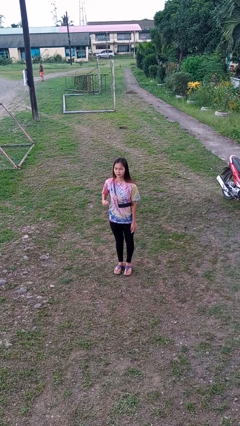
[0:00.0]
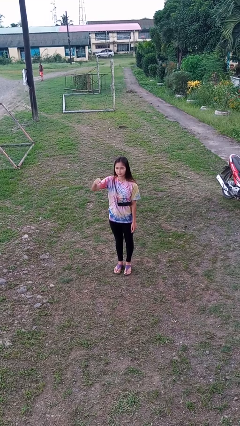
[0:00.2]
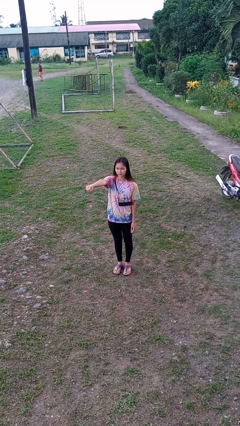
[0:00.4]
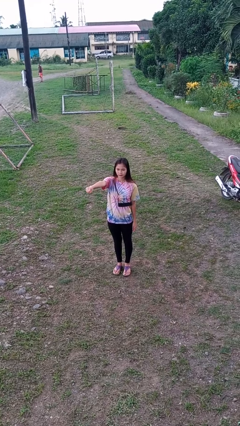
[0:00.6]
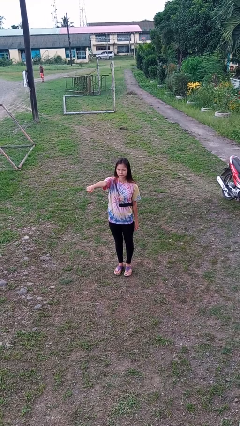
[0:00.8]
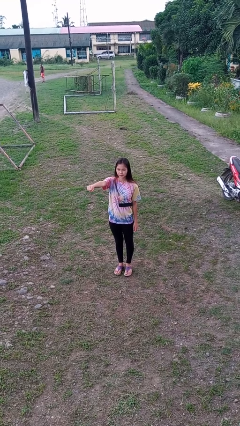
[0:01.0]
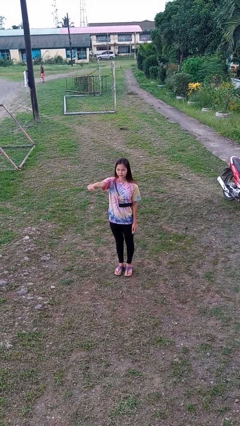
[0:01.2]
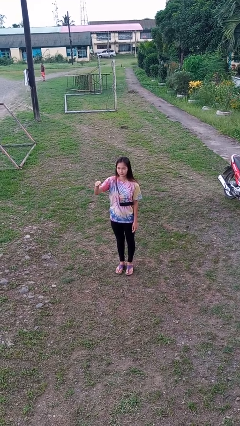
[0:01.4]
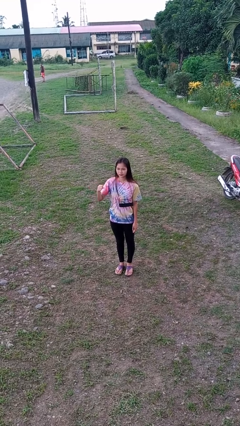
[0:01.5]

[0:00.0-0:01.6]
person punches

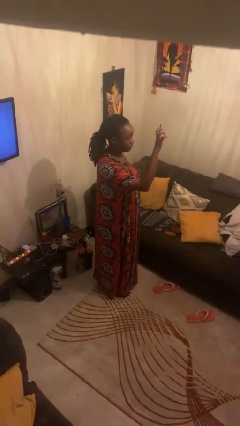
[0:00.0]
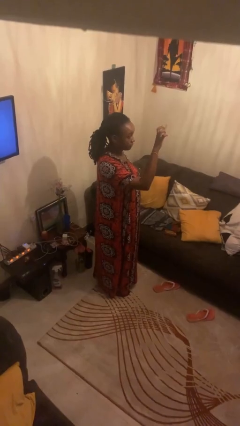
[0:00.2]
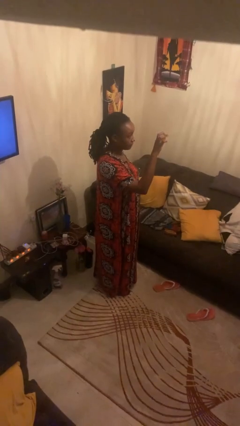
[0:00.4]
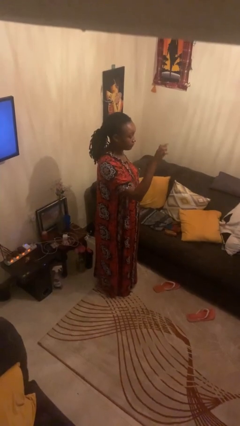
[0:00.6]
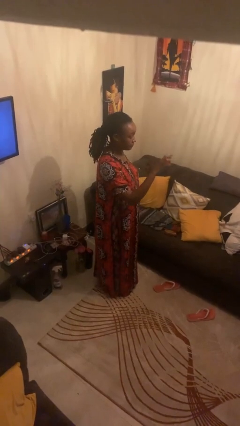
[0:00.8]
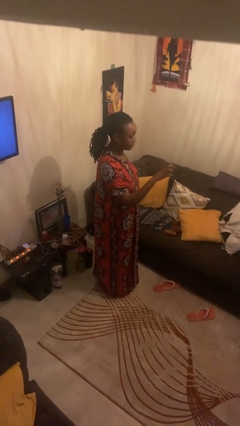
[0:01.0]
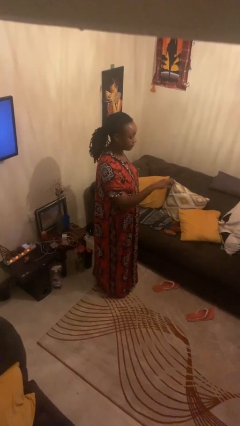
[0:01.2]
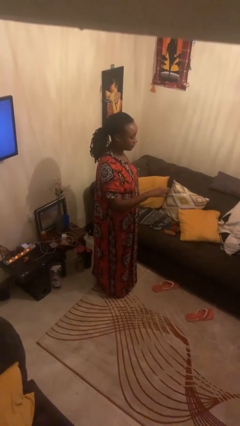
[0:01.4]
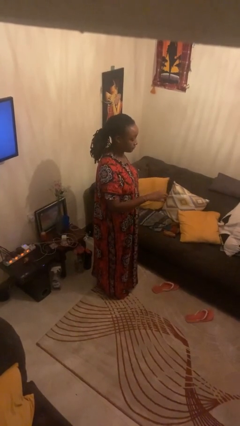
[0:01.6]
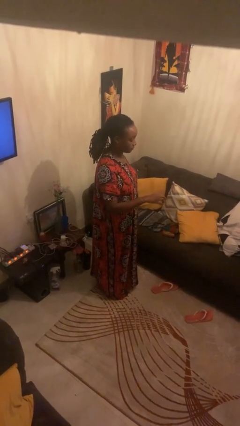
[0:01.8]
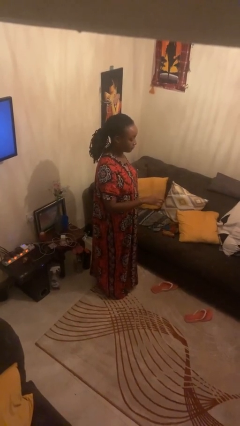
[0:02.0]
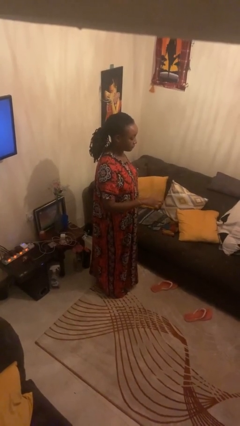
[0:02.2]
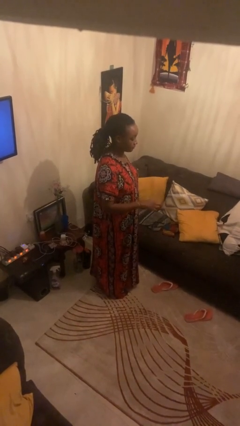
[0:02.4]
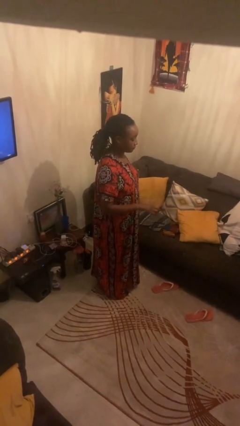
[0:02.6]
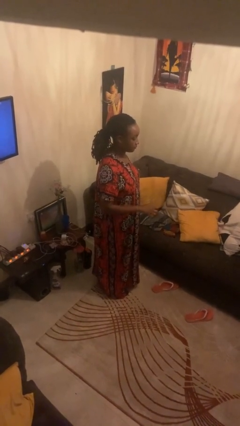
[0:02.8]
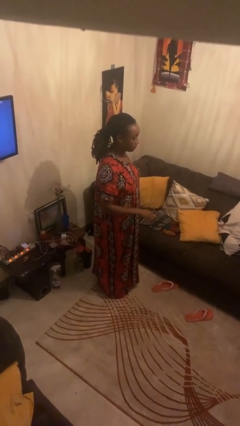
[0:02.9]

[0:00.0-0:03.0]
person gestures swipe down

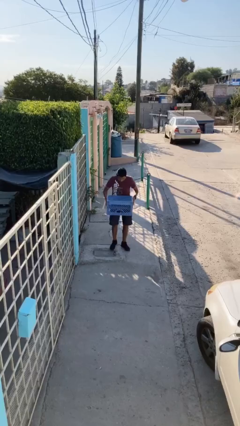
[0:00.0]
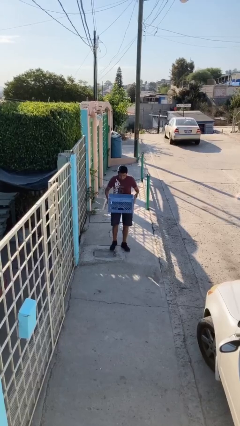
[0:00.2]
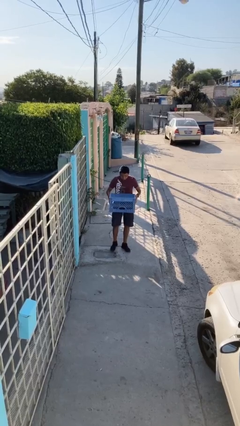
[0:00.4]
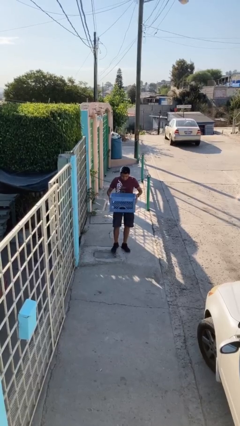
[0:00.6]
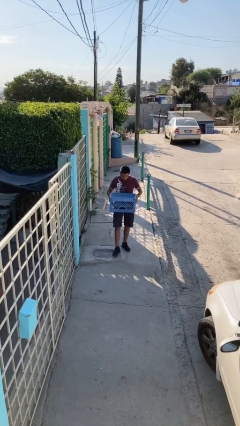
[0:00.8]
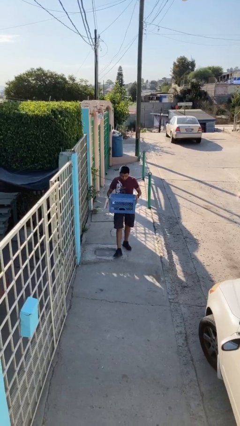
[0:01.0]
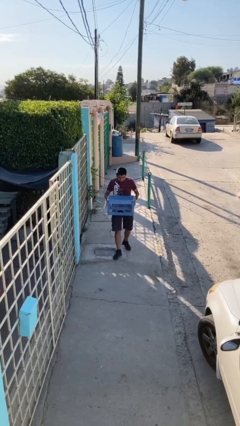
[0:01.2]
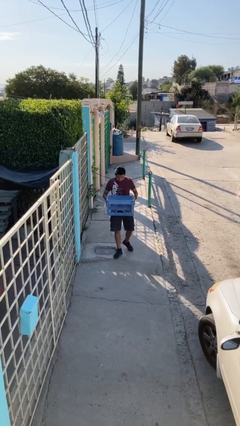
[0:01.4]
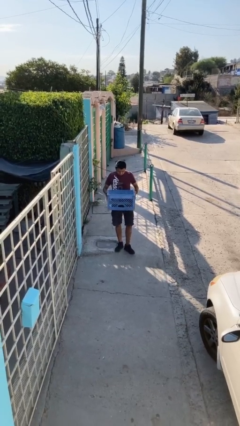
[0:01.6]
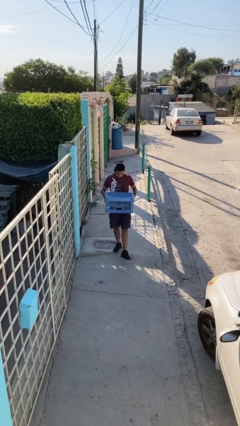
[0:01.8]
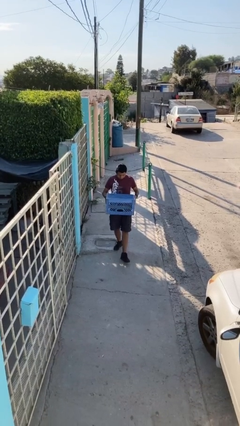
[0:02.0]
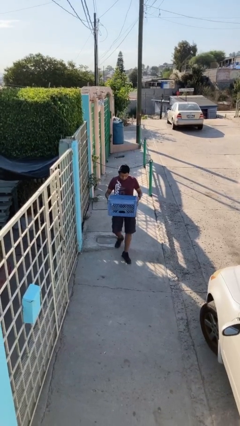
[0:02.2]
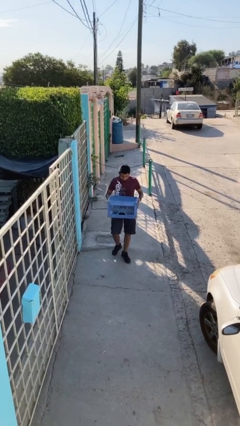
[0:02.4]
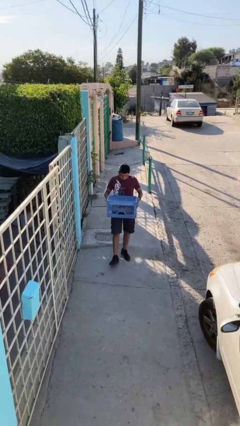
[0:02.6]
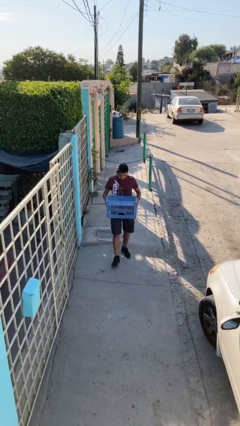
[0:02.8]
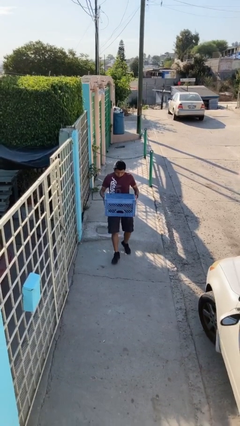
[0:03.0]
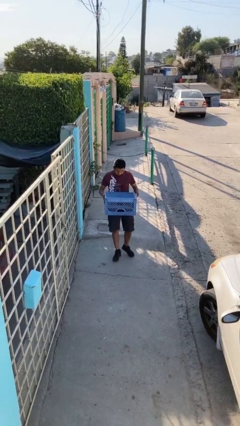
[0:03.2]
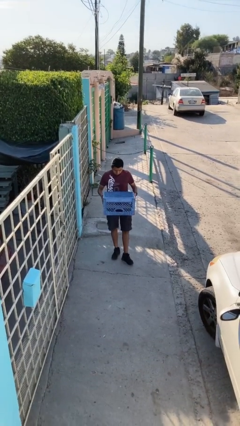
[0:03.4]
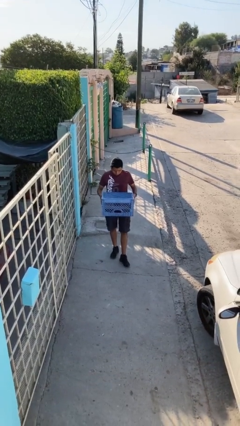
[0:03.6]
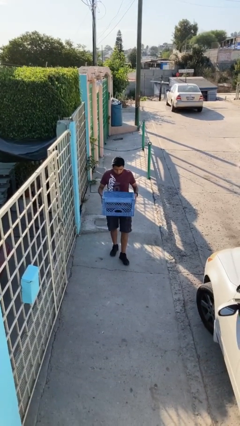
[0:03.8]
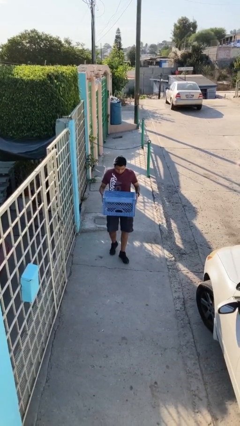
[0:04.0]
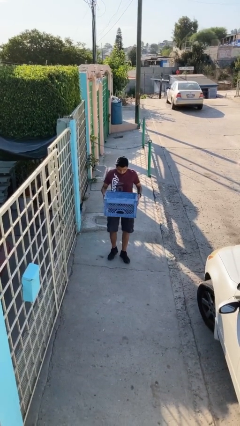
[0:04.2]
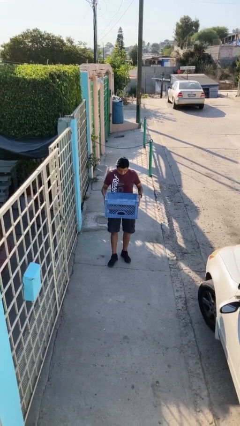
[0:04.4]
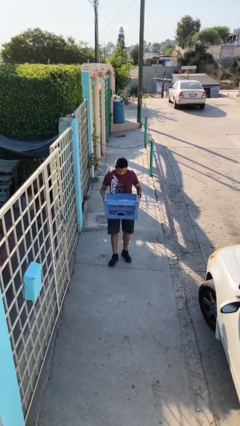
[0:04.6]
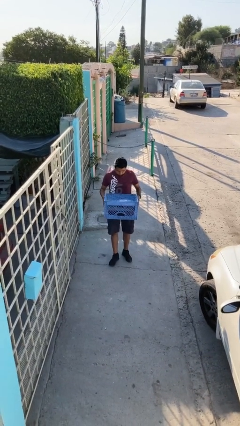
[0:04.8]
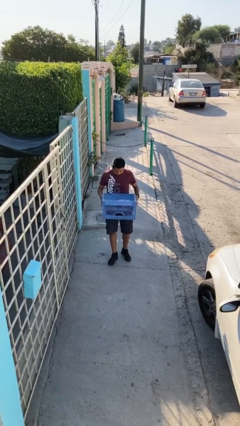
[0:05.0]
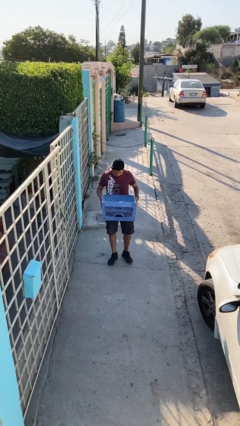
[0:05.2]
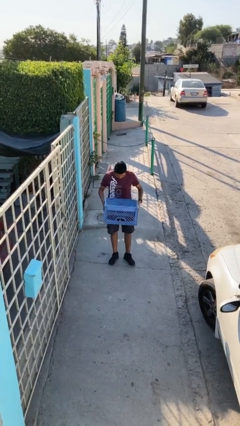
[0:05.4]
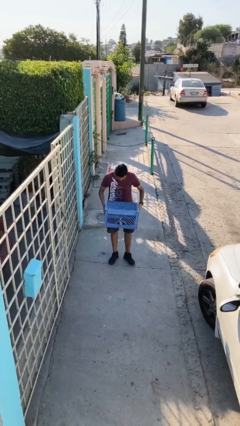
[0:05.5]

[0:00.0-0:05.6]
person carries heavy object

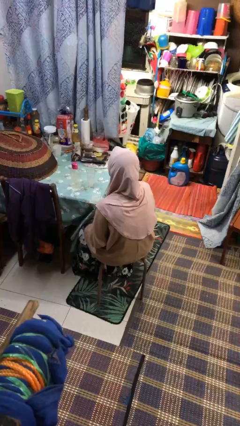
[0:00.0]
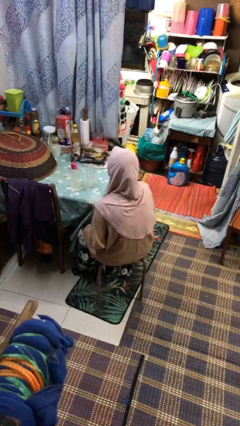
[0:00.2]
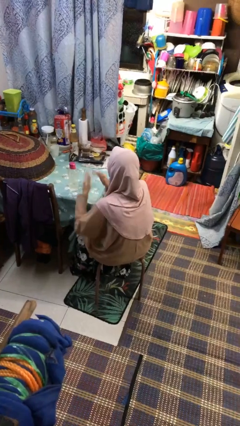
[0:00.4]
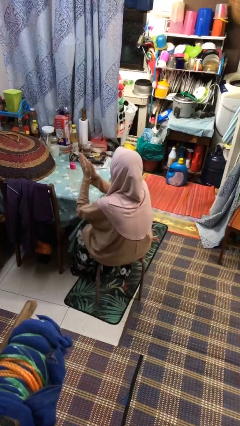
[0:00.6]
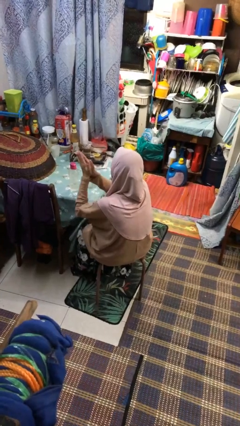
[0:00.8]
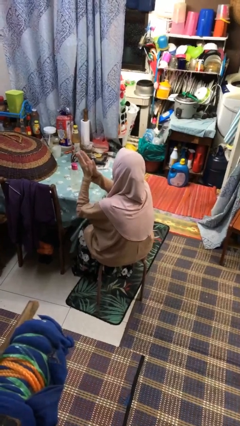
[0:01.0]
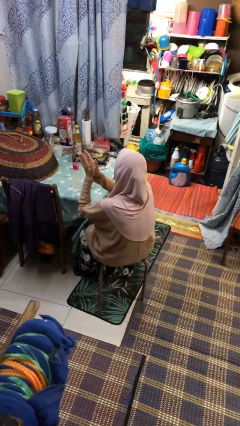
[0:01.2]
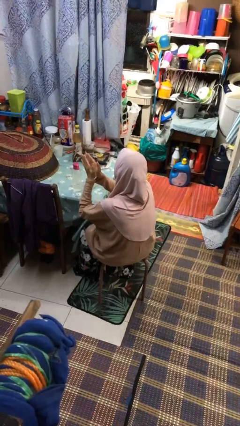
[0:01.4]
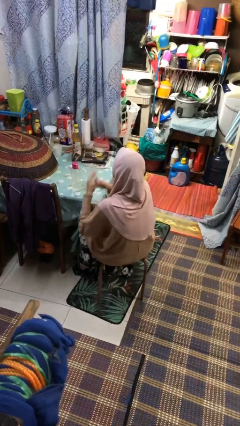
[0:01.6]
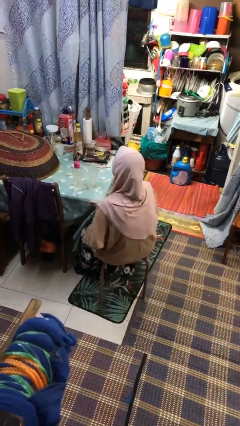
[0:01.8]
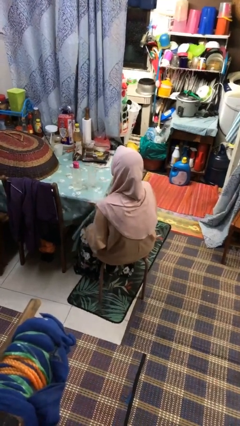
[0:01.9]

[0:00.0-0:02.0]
person claps hands

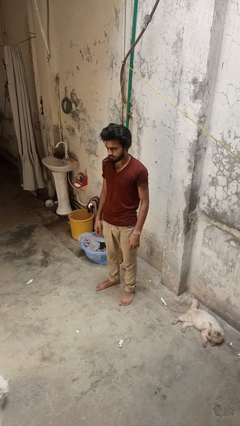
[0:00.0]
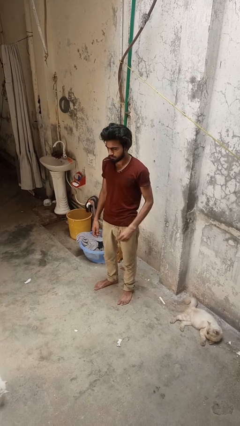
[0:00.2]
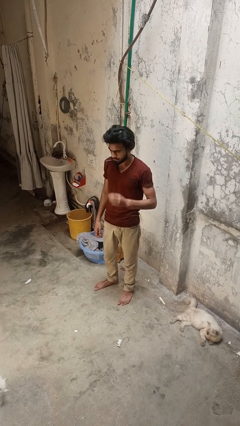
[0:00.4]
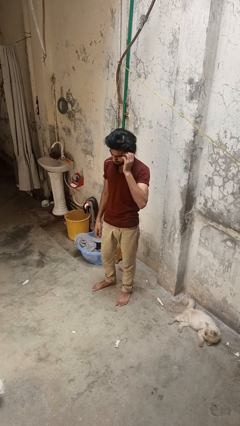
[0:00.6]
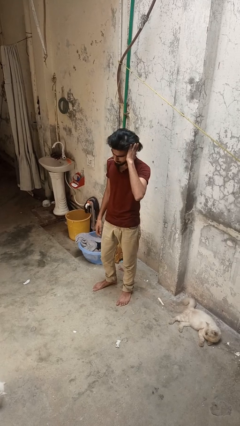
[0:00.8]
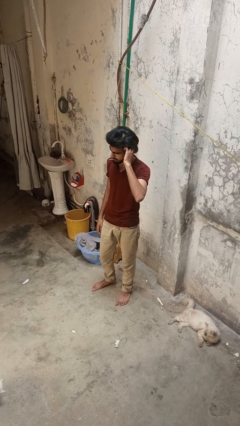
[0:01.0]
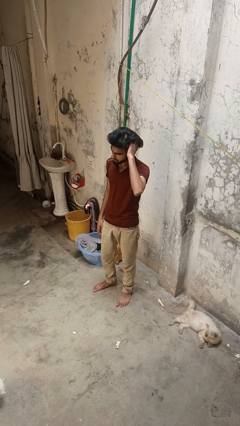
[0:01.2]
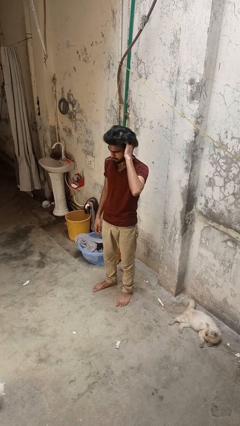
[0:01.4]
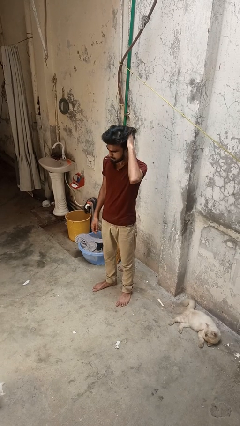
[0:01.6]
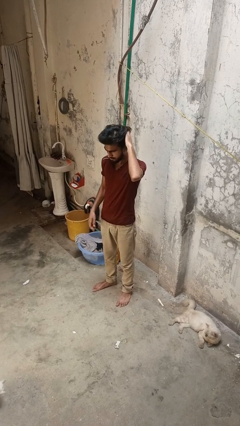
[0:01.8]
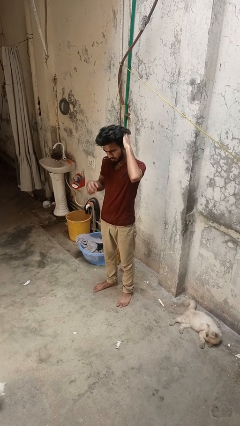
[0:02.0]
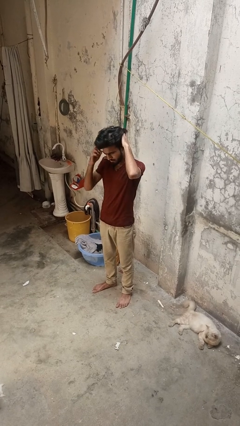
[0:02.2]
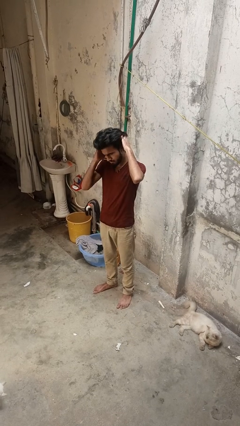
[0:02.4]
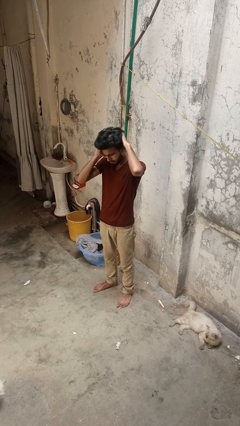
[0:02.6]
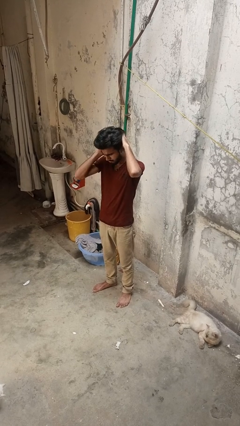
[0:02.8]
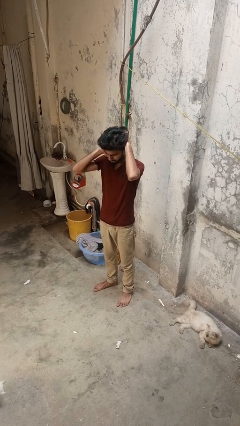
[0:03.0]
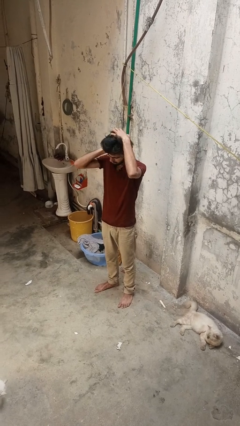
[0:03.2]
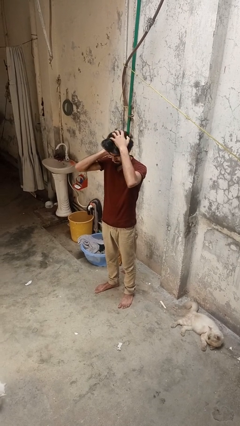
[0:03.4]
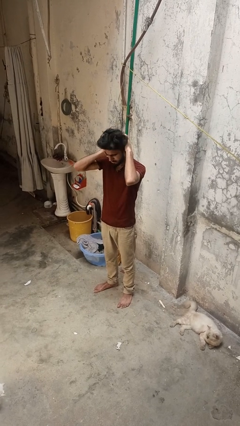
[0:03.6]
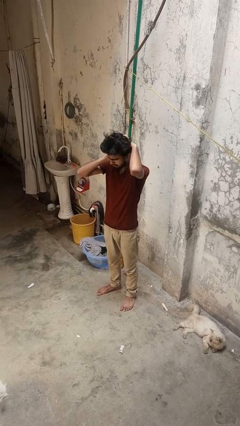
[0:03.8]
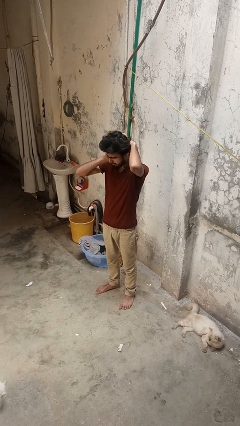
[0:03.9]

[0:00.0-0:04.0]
person scratches face

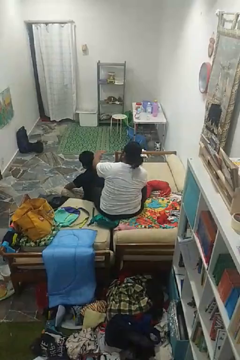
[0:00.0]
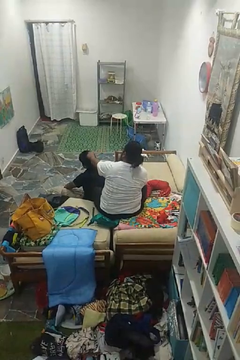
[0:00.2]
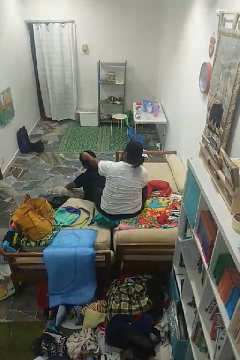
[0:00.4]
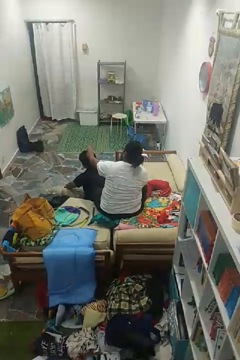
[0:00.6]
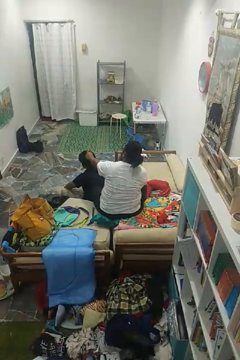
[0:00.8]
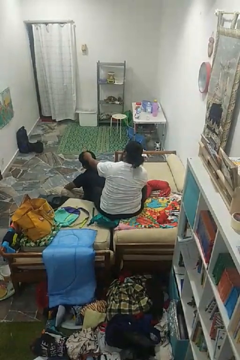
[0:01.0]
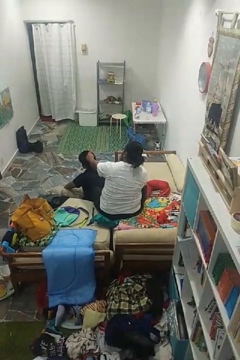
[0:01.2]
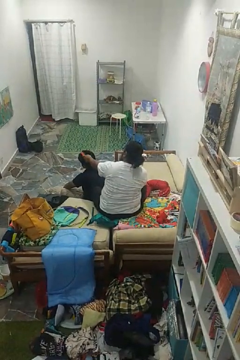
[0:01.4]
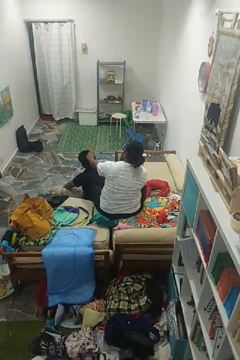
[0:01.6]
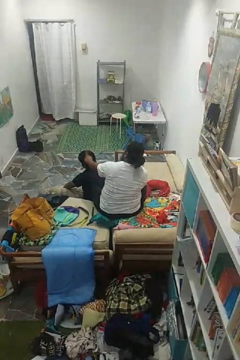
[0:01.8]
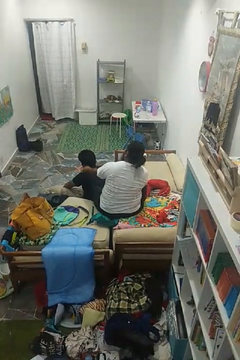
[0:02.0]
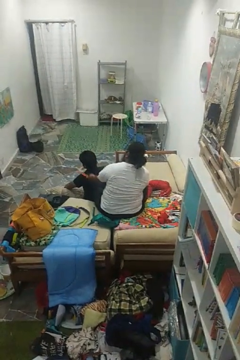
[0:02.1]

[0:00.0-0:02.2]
person brushes hair of person
